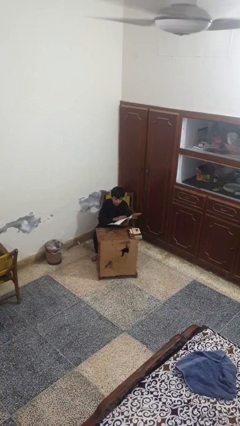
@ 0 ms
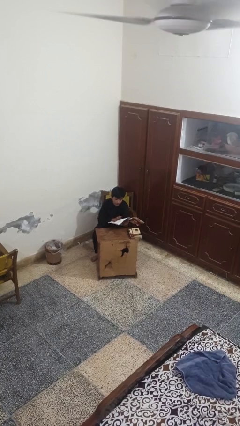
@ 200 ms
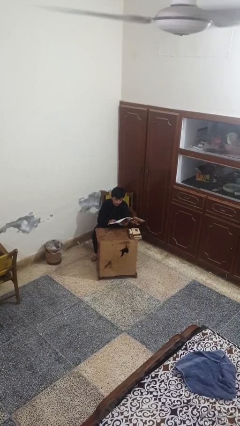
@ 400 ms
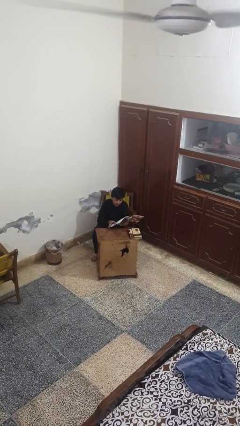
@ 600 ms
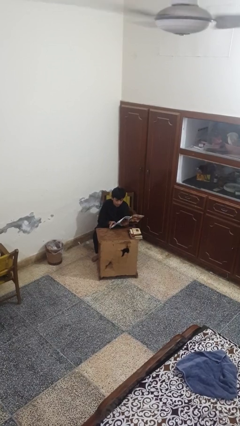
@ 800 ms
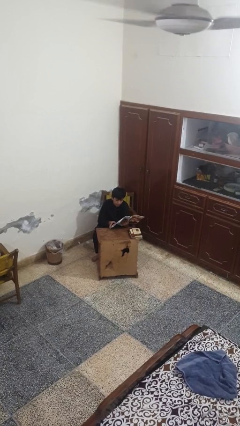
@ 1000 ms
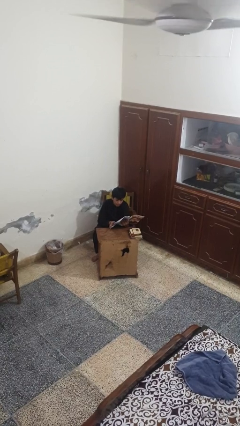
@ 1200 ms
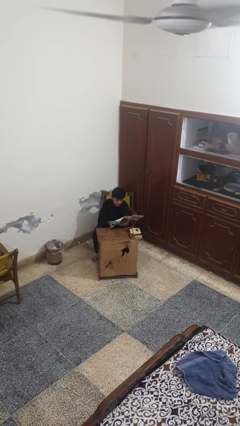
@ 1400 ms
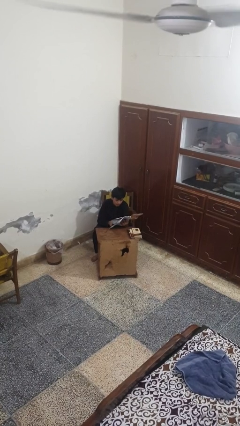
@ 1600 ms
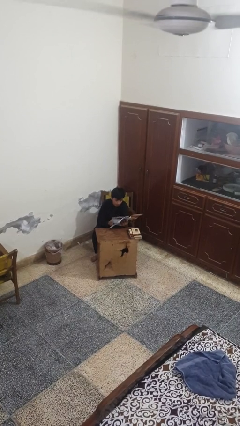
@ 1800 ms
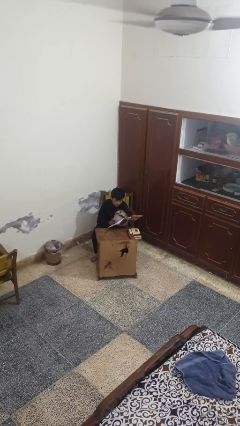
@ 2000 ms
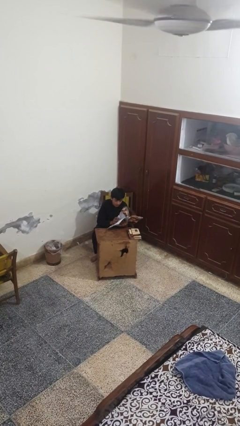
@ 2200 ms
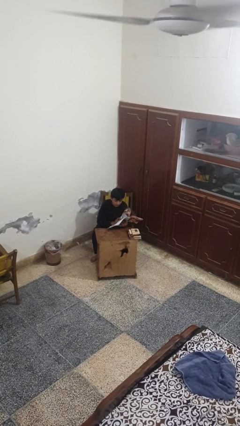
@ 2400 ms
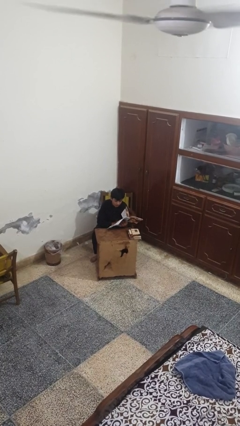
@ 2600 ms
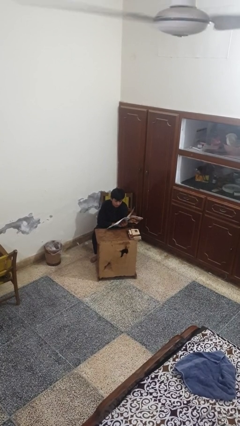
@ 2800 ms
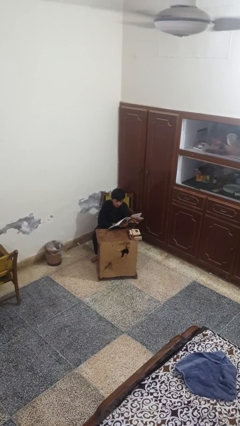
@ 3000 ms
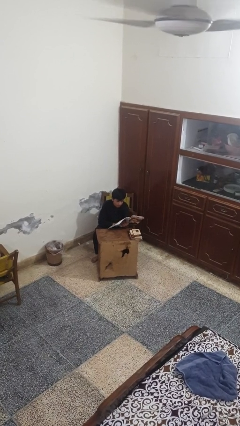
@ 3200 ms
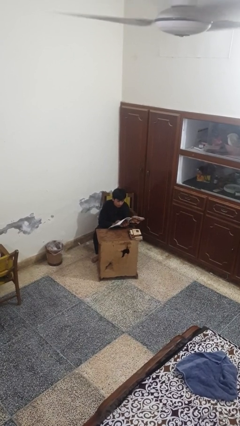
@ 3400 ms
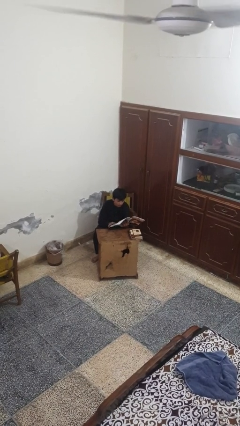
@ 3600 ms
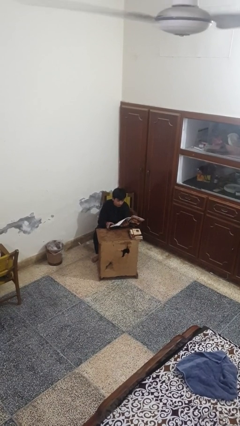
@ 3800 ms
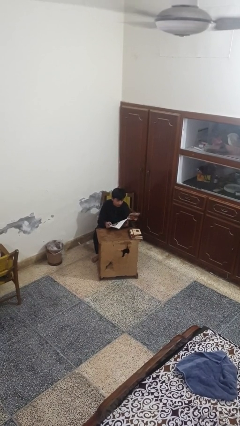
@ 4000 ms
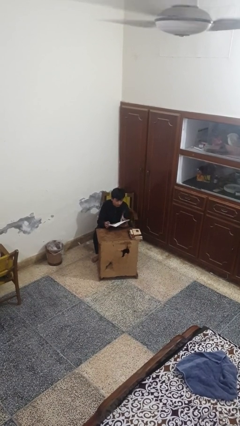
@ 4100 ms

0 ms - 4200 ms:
person reads magazine

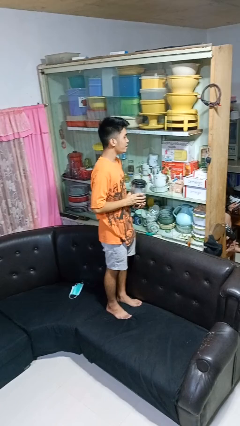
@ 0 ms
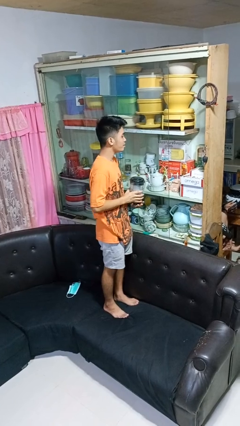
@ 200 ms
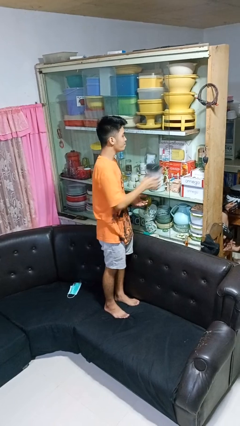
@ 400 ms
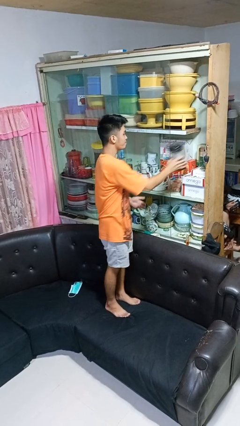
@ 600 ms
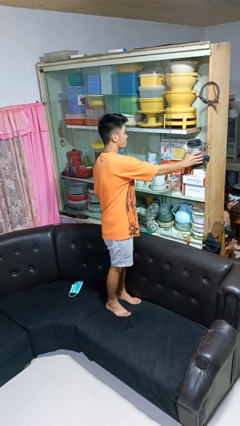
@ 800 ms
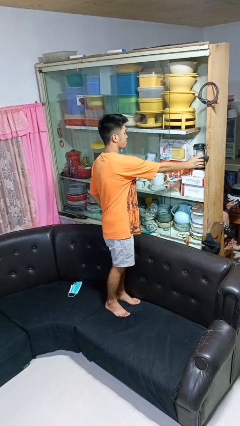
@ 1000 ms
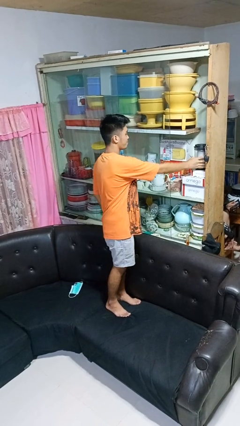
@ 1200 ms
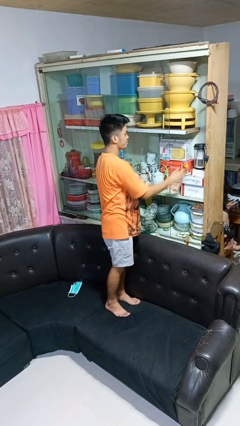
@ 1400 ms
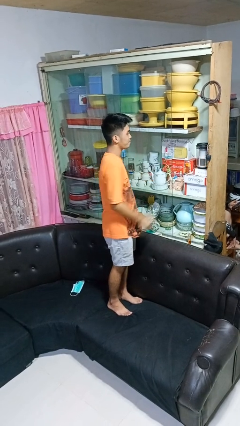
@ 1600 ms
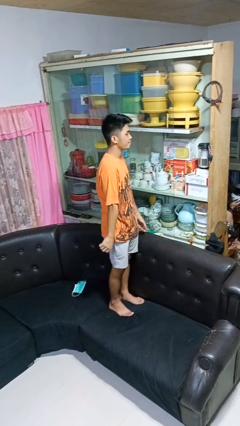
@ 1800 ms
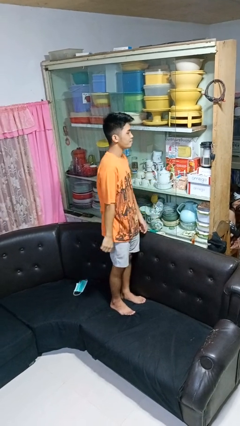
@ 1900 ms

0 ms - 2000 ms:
person puts down object into cabinet

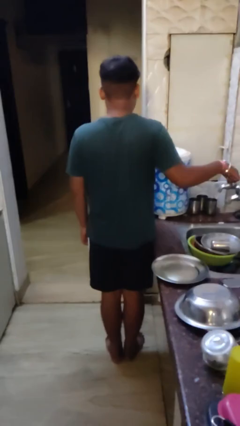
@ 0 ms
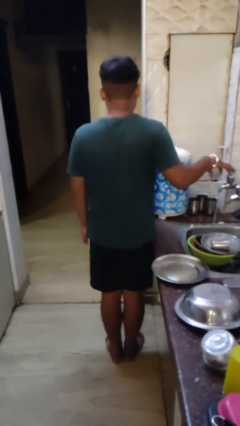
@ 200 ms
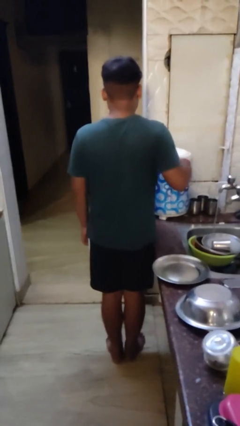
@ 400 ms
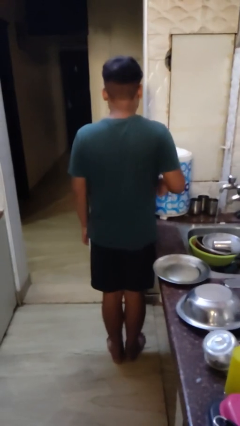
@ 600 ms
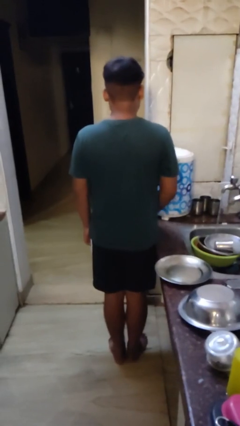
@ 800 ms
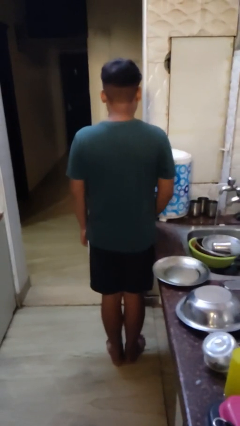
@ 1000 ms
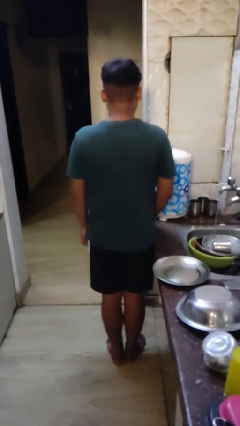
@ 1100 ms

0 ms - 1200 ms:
person turns on faucet

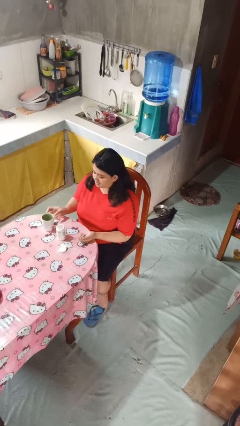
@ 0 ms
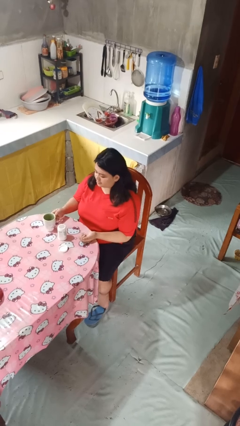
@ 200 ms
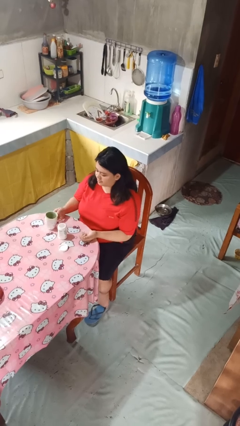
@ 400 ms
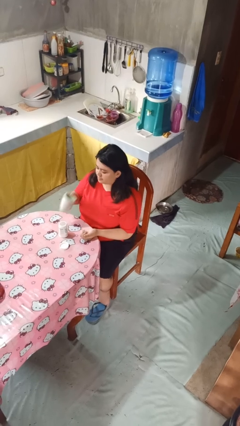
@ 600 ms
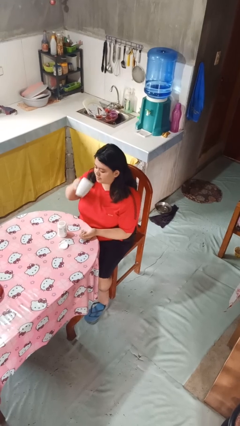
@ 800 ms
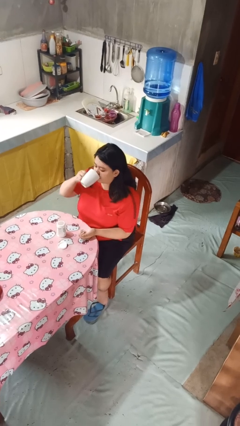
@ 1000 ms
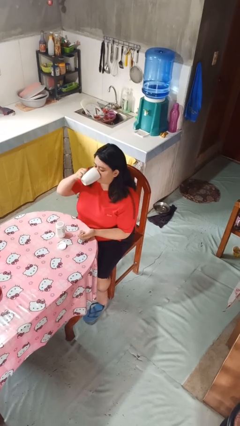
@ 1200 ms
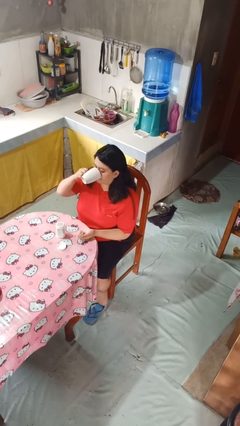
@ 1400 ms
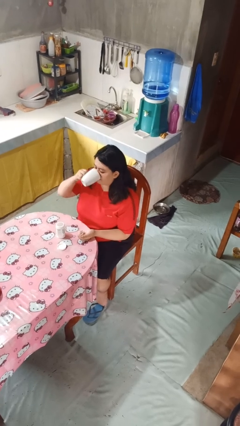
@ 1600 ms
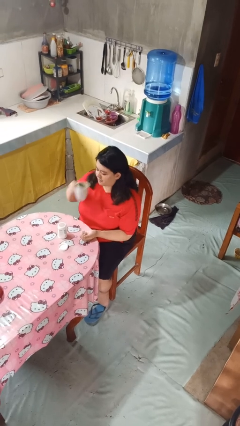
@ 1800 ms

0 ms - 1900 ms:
person drinks from cup

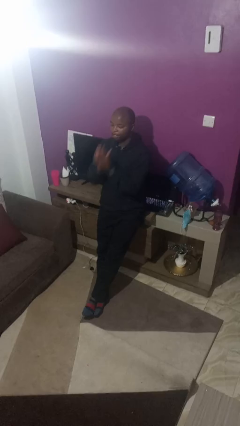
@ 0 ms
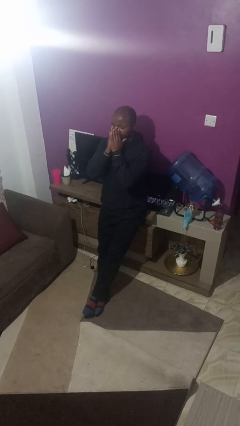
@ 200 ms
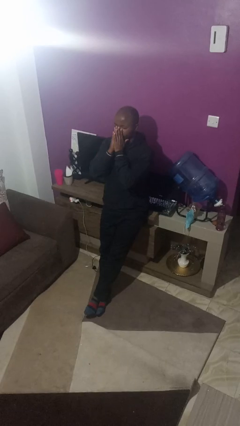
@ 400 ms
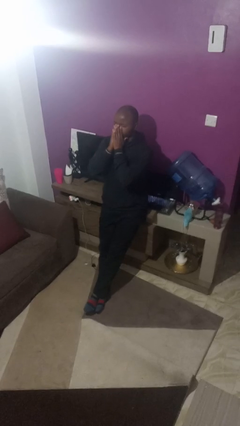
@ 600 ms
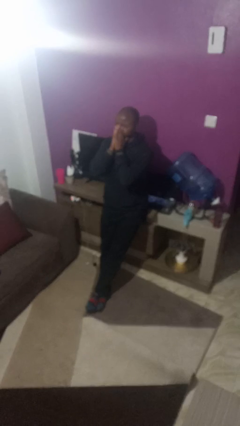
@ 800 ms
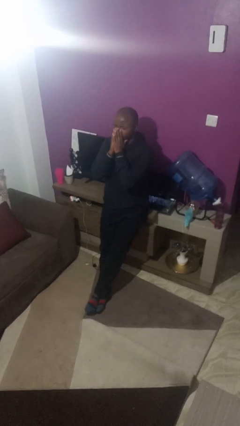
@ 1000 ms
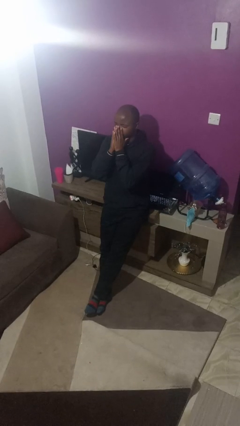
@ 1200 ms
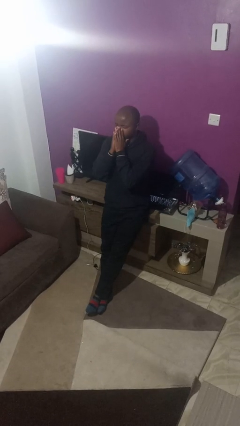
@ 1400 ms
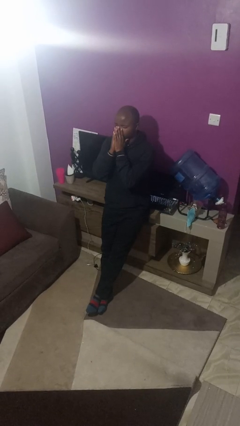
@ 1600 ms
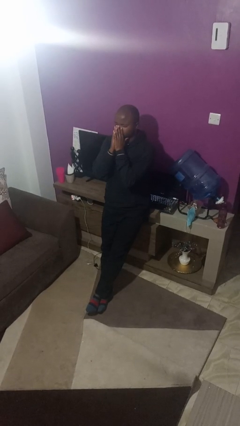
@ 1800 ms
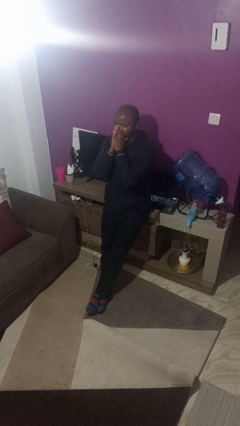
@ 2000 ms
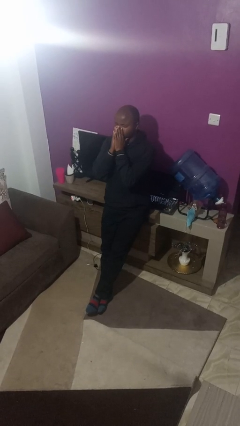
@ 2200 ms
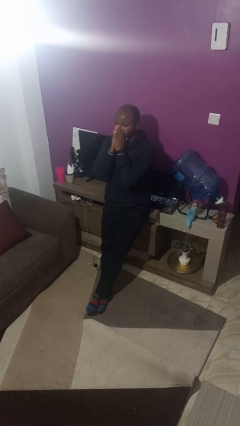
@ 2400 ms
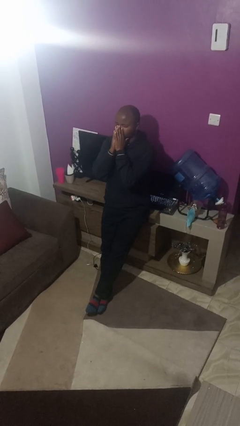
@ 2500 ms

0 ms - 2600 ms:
person sneezes into hand

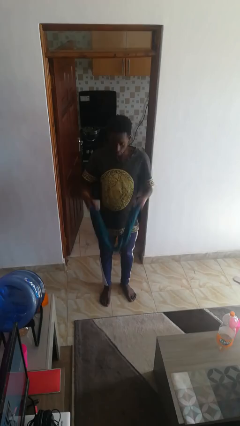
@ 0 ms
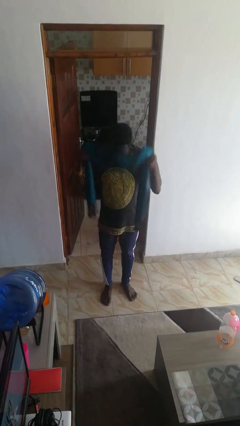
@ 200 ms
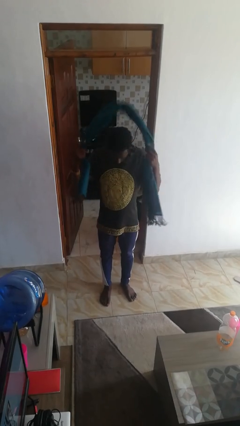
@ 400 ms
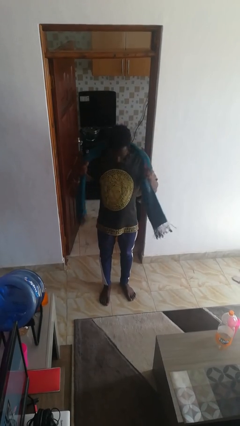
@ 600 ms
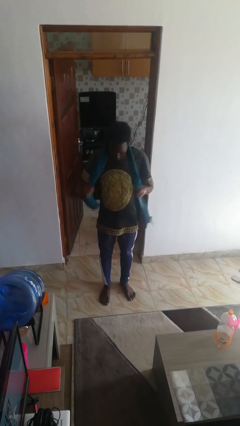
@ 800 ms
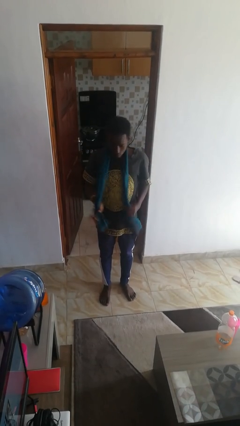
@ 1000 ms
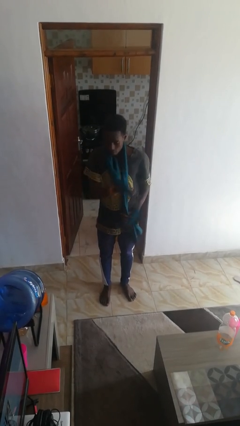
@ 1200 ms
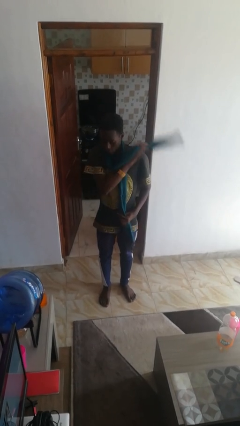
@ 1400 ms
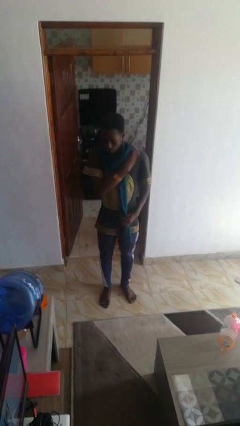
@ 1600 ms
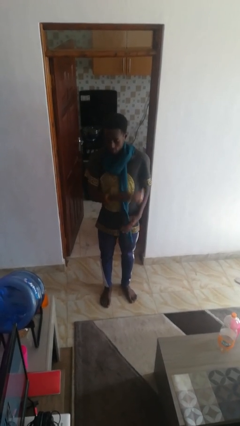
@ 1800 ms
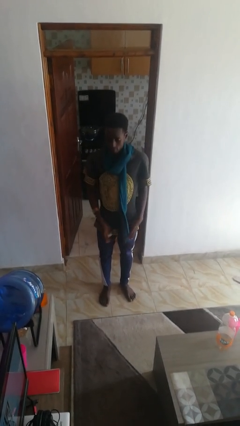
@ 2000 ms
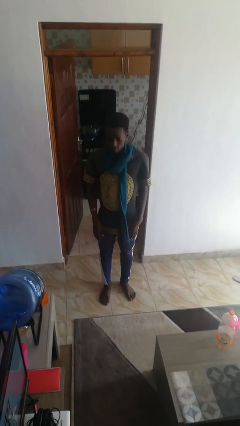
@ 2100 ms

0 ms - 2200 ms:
person puts on scarf

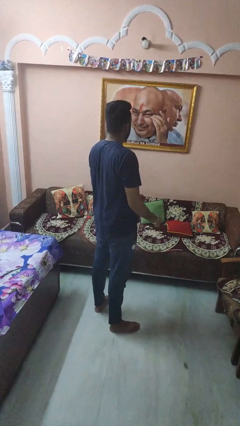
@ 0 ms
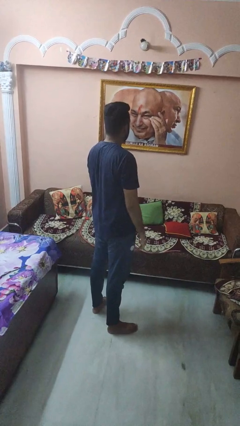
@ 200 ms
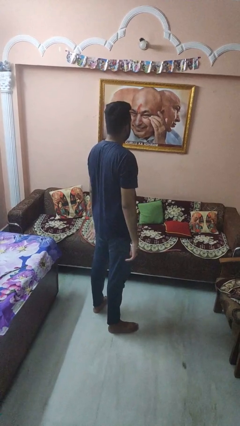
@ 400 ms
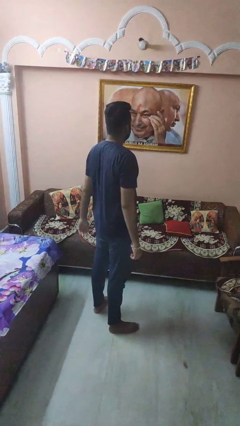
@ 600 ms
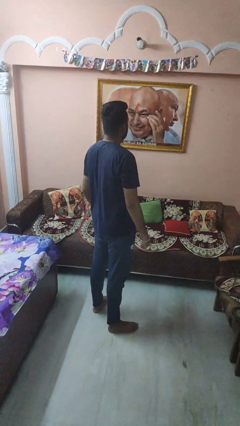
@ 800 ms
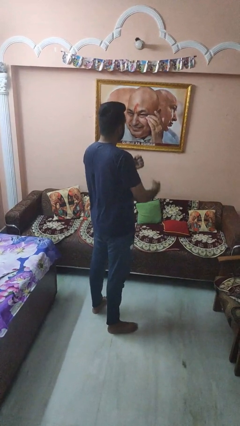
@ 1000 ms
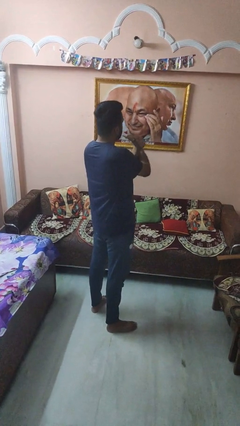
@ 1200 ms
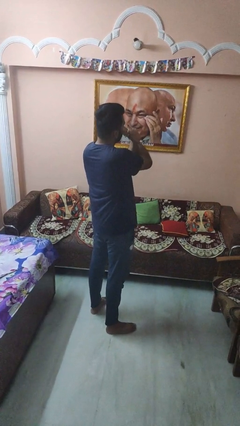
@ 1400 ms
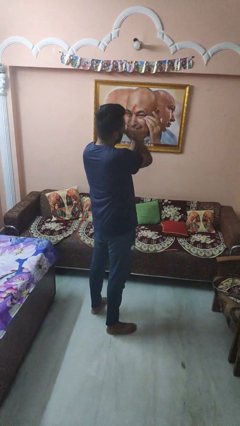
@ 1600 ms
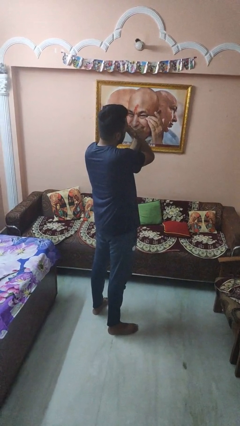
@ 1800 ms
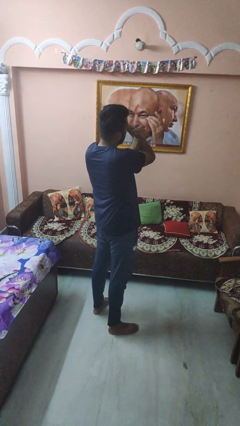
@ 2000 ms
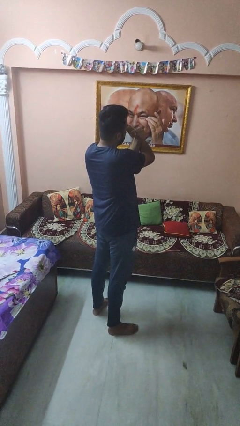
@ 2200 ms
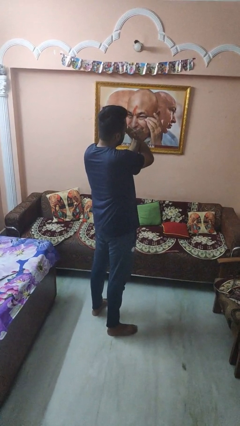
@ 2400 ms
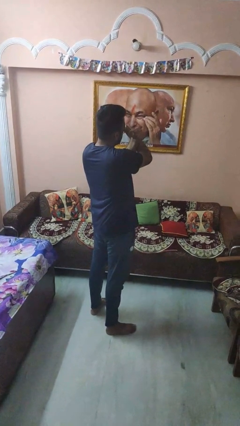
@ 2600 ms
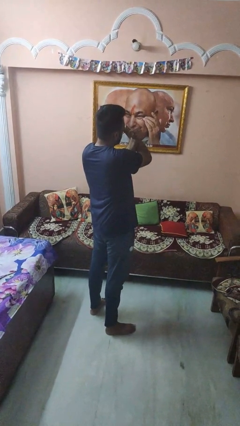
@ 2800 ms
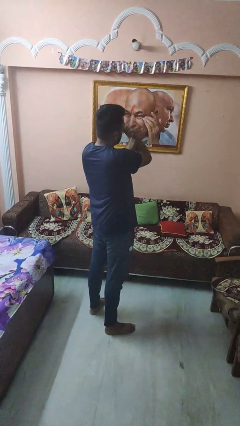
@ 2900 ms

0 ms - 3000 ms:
person gestures arms x
